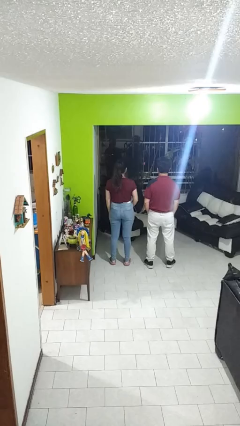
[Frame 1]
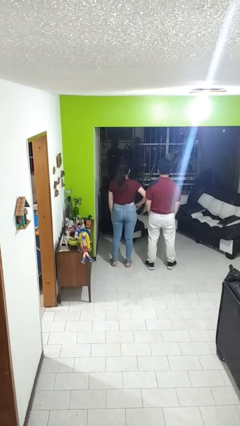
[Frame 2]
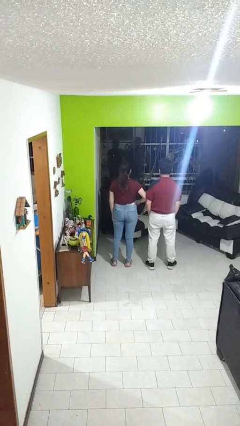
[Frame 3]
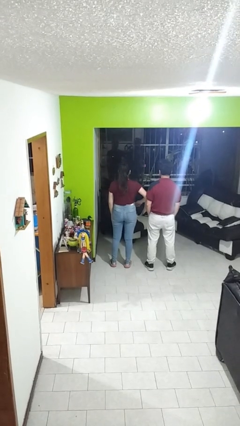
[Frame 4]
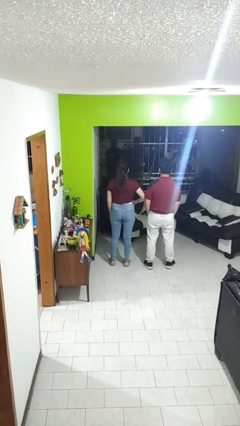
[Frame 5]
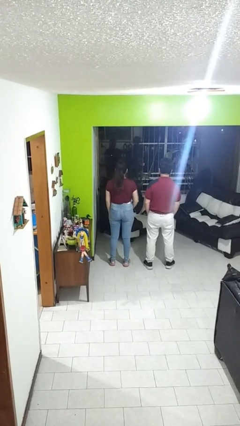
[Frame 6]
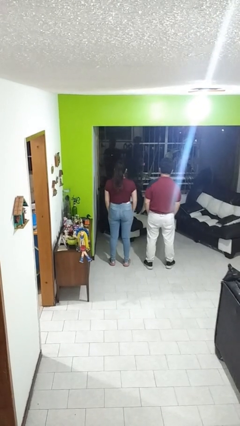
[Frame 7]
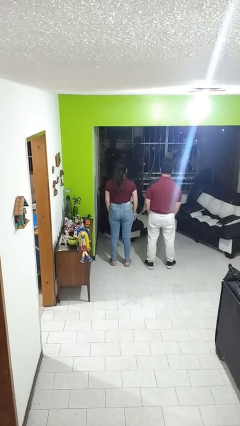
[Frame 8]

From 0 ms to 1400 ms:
person nudges person with elbow

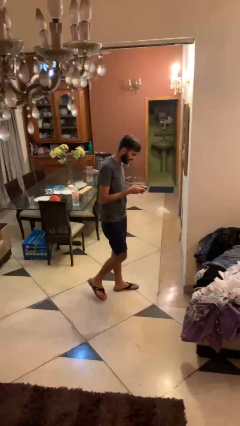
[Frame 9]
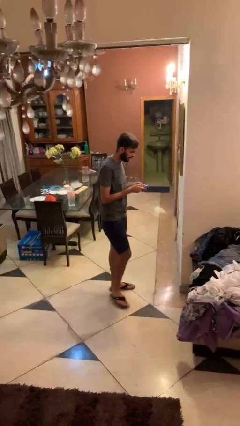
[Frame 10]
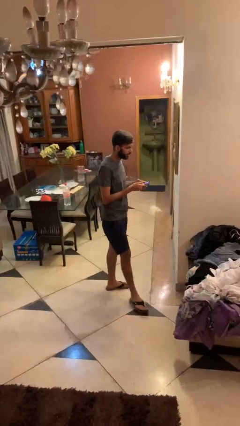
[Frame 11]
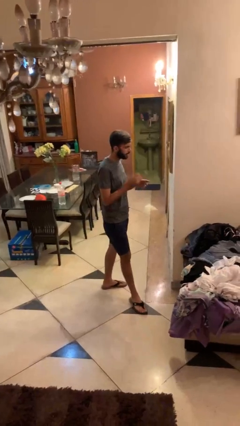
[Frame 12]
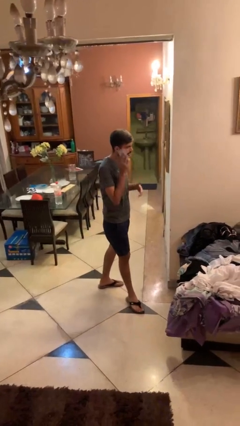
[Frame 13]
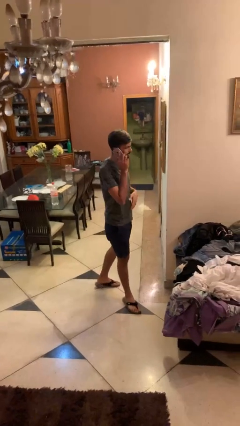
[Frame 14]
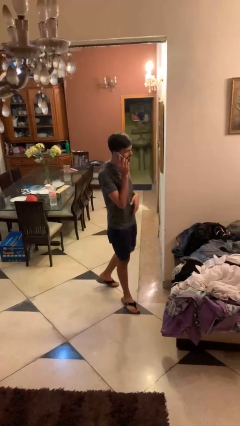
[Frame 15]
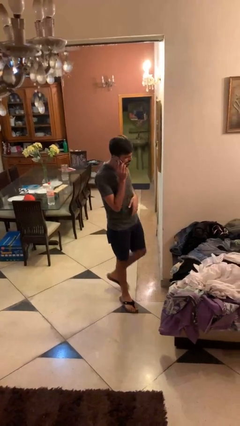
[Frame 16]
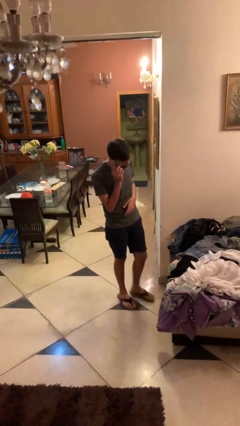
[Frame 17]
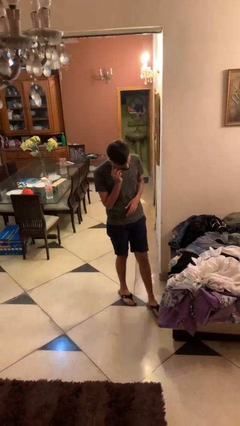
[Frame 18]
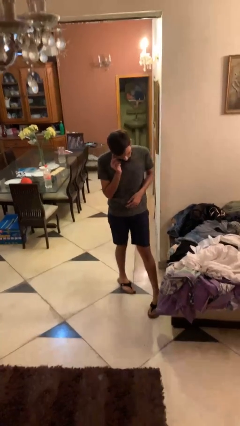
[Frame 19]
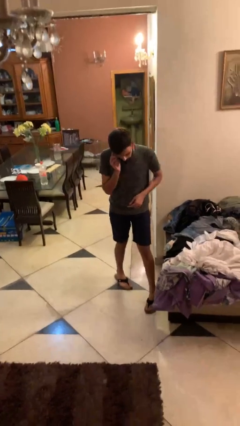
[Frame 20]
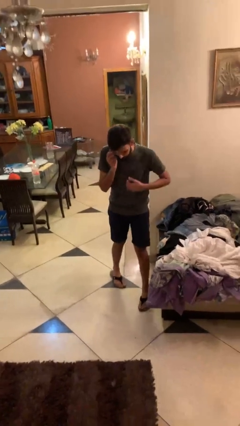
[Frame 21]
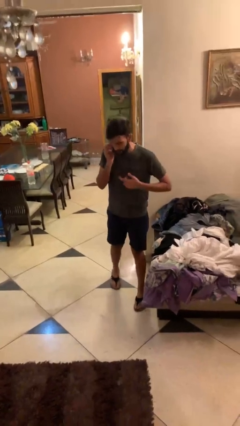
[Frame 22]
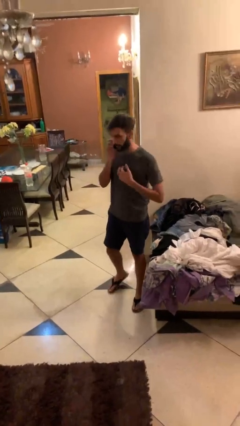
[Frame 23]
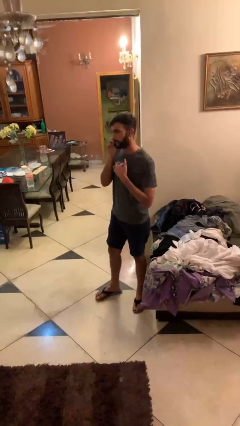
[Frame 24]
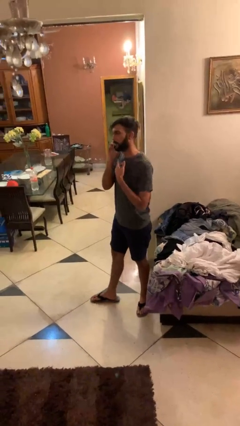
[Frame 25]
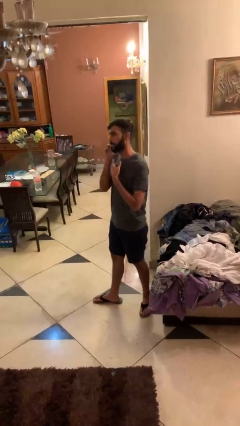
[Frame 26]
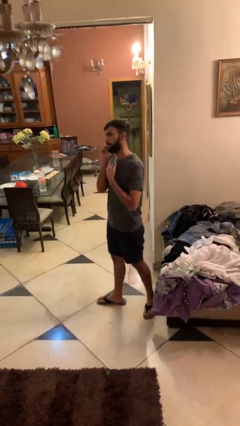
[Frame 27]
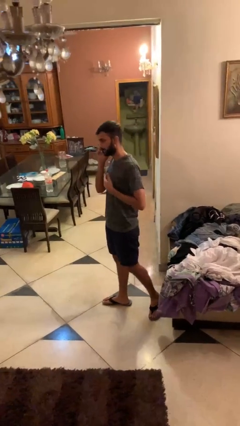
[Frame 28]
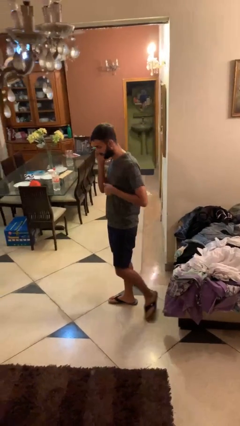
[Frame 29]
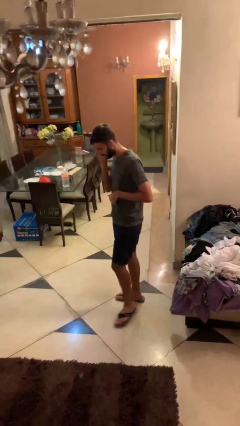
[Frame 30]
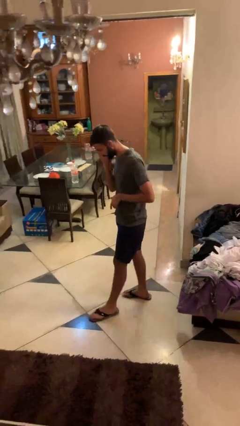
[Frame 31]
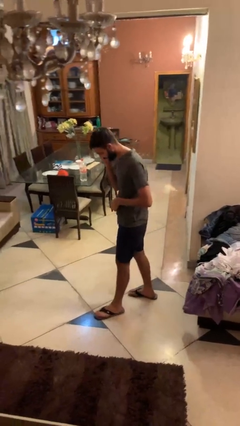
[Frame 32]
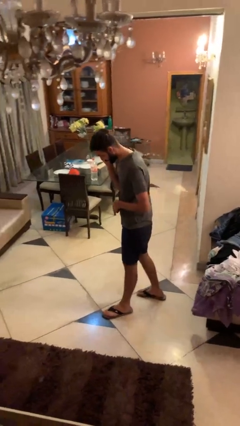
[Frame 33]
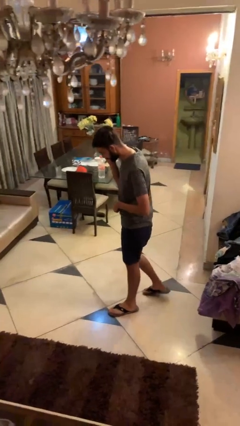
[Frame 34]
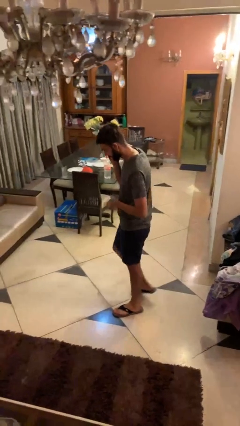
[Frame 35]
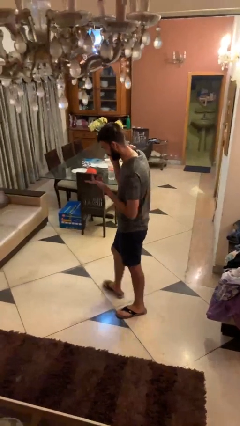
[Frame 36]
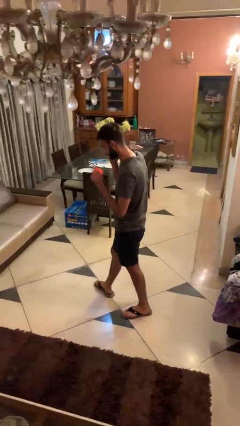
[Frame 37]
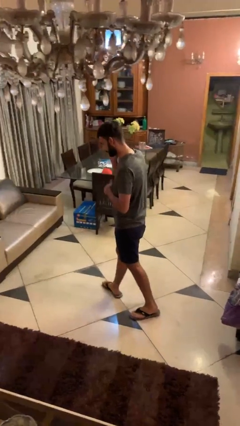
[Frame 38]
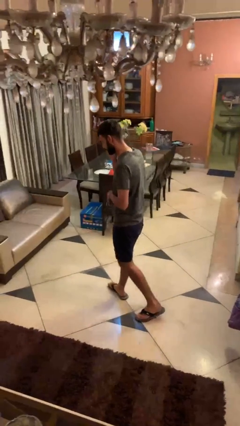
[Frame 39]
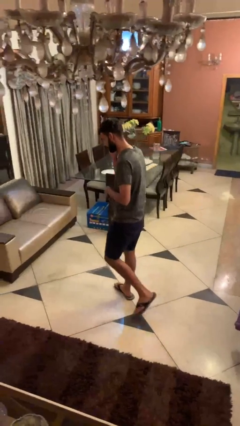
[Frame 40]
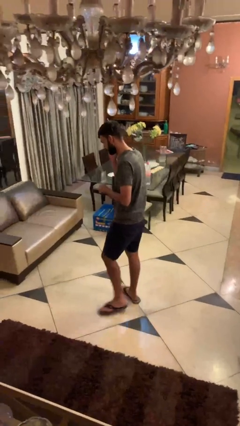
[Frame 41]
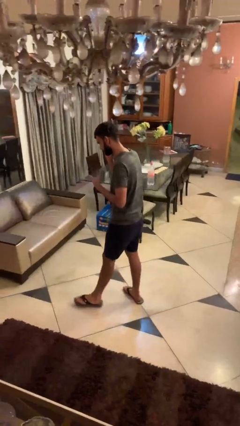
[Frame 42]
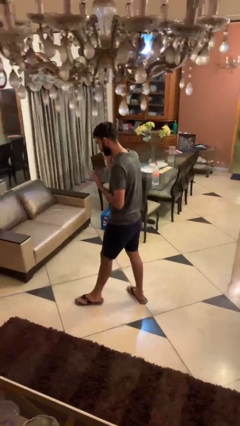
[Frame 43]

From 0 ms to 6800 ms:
person talks on phone

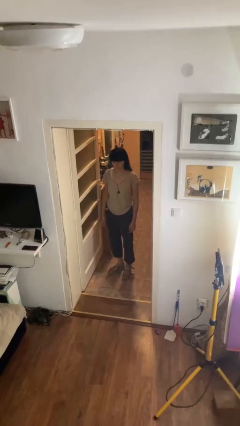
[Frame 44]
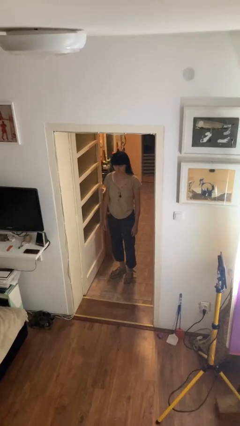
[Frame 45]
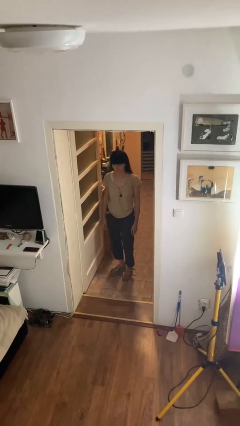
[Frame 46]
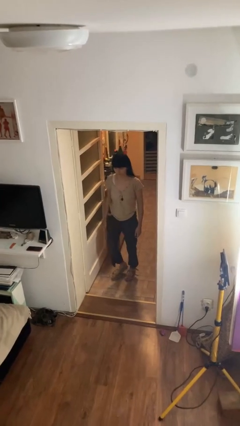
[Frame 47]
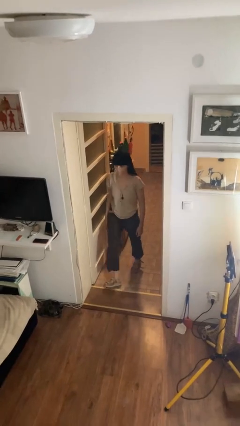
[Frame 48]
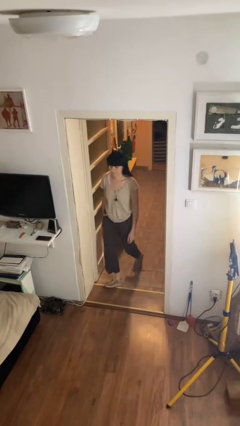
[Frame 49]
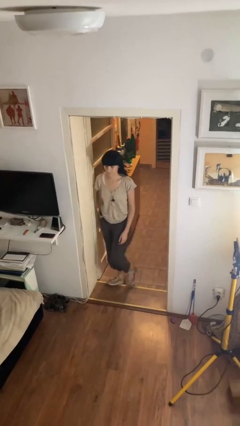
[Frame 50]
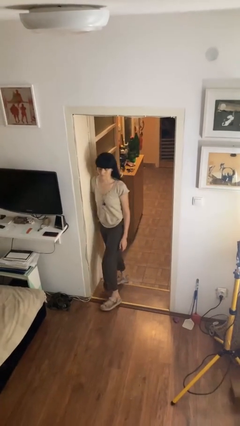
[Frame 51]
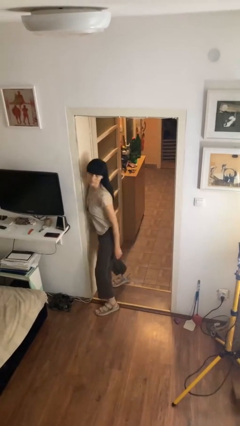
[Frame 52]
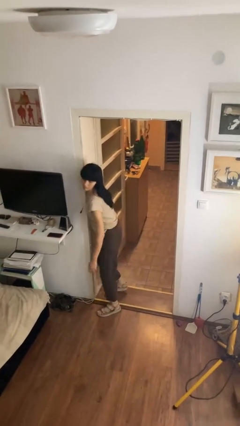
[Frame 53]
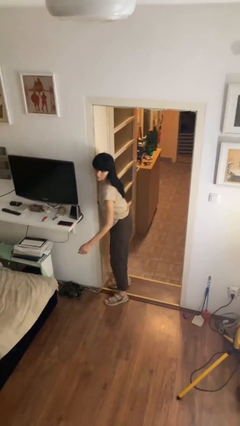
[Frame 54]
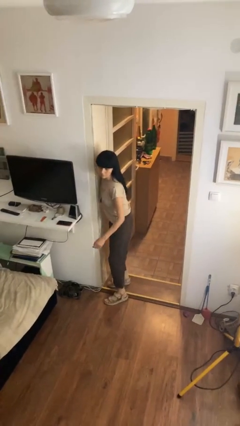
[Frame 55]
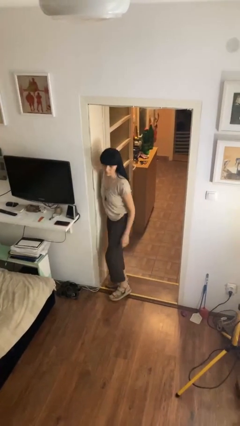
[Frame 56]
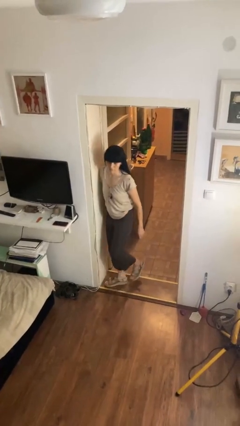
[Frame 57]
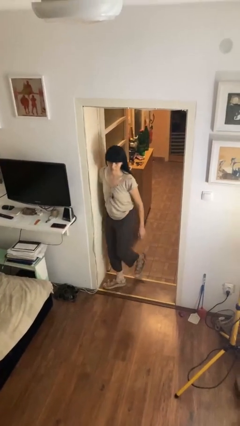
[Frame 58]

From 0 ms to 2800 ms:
person bumps into wall

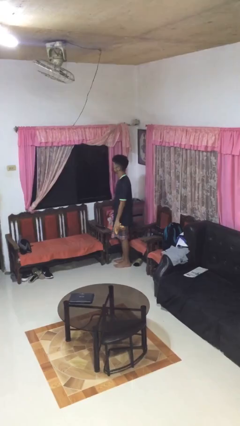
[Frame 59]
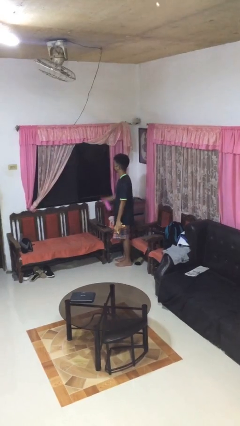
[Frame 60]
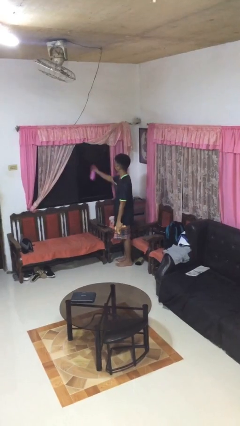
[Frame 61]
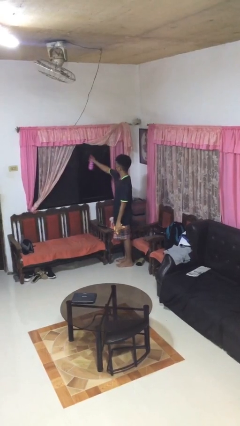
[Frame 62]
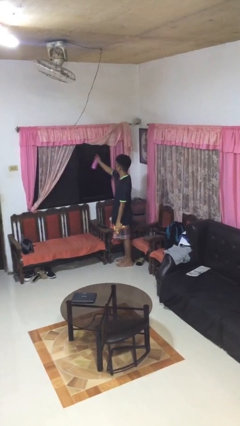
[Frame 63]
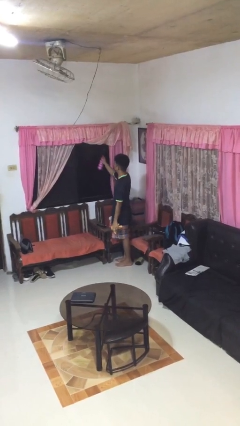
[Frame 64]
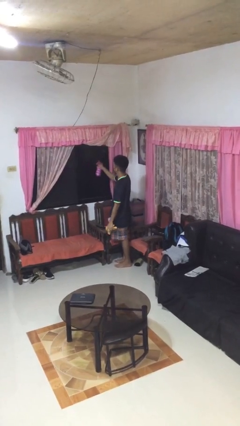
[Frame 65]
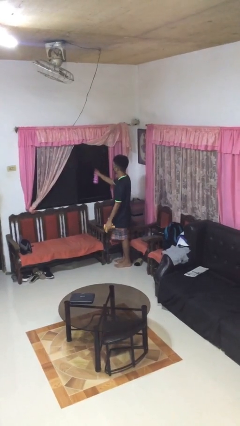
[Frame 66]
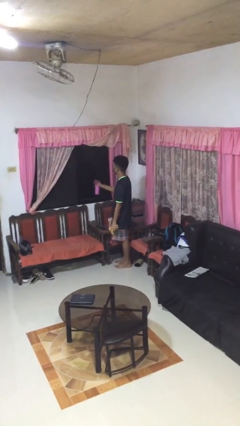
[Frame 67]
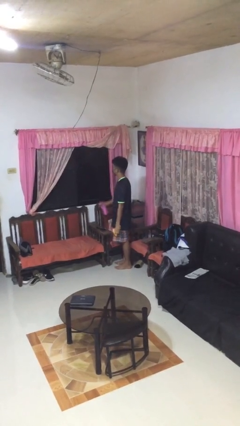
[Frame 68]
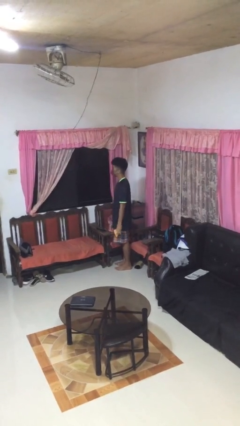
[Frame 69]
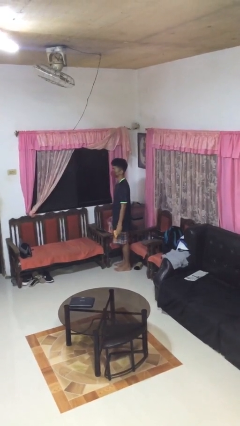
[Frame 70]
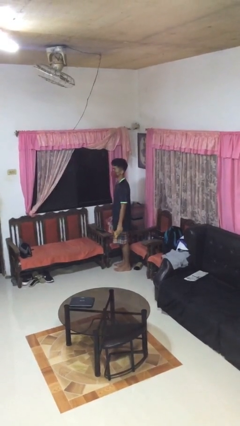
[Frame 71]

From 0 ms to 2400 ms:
person sprays from bottle

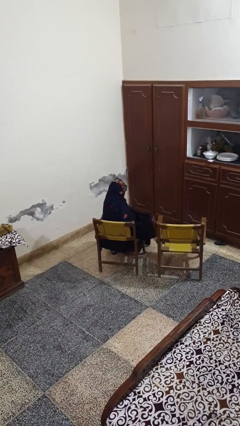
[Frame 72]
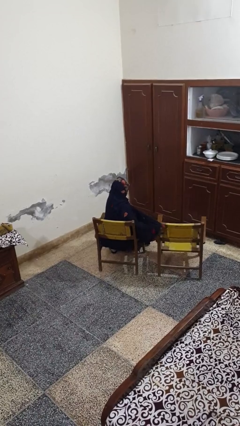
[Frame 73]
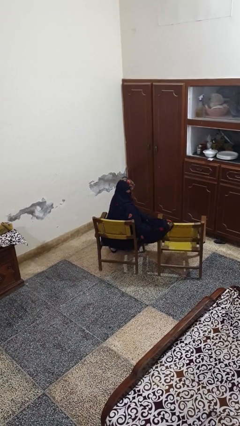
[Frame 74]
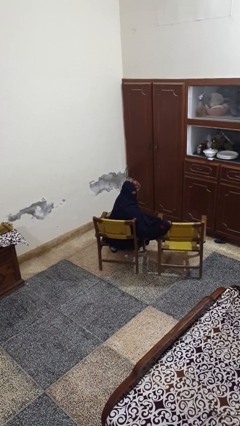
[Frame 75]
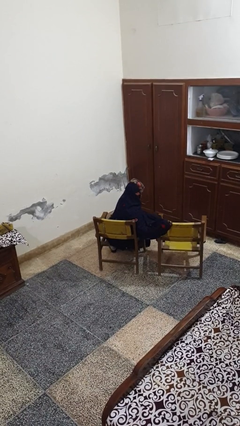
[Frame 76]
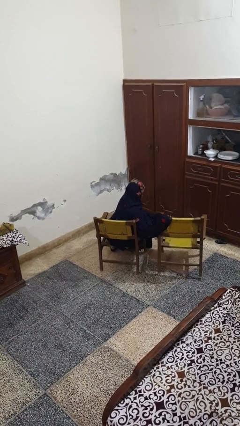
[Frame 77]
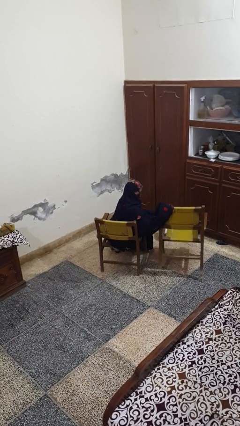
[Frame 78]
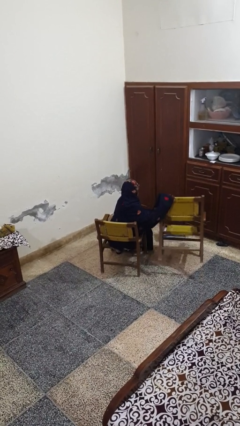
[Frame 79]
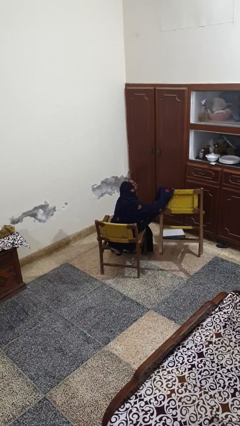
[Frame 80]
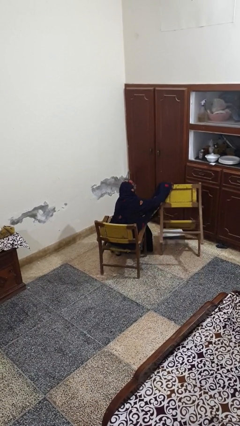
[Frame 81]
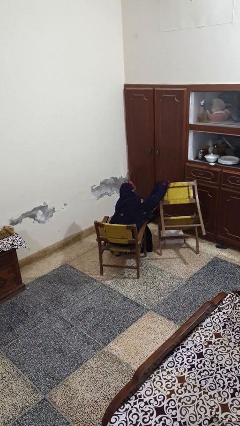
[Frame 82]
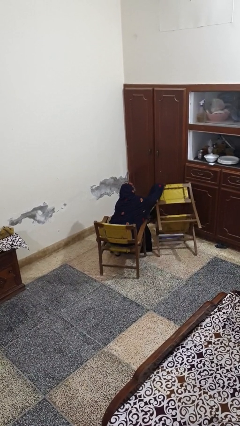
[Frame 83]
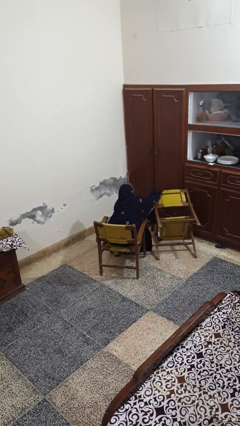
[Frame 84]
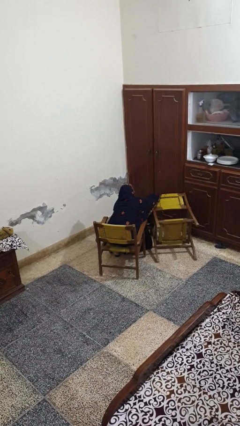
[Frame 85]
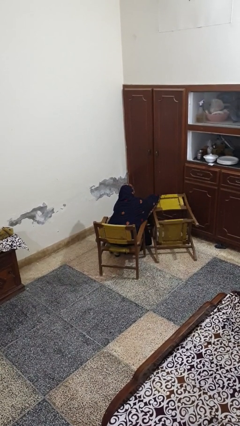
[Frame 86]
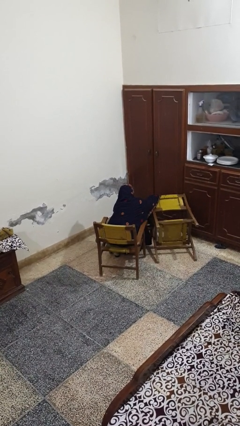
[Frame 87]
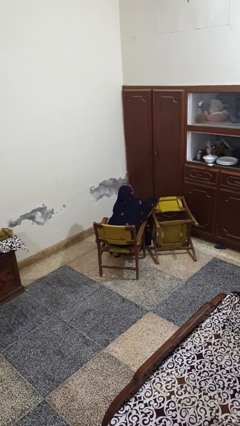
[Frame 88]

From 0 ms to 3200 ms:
person knocks over furniture

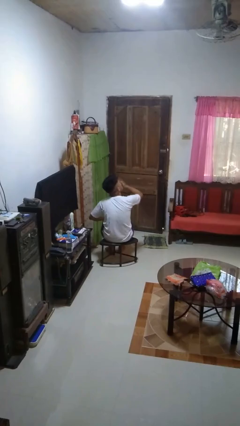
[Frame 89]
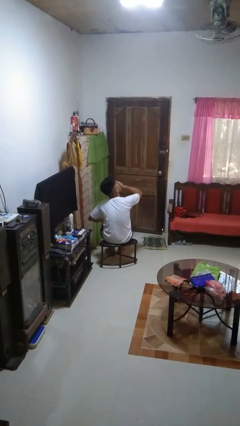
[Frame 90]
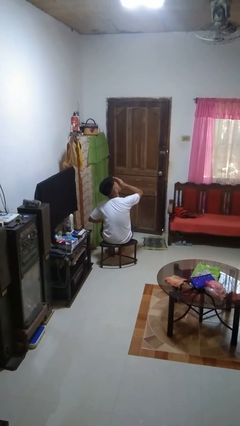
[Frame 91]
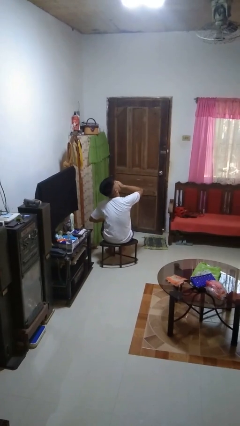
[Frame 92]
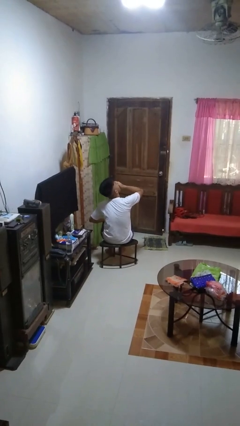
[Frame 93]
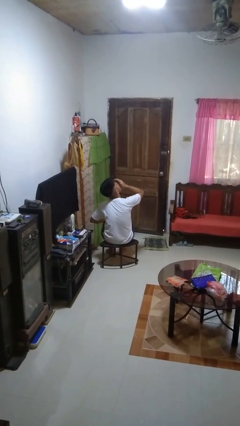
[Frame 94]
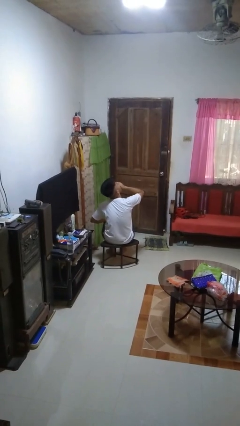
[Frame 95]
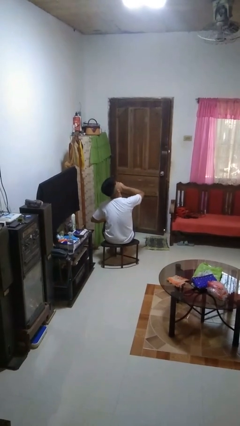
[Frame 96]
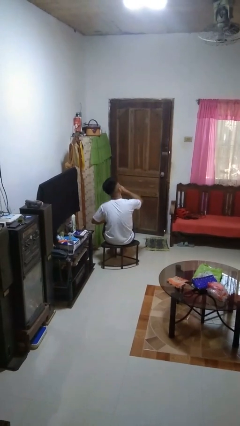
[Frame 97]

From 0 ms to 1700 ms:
person yawns
